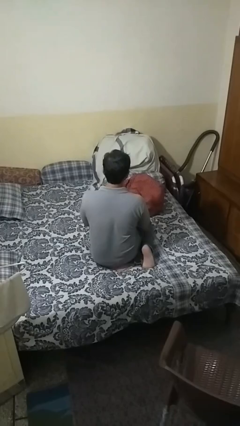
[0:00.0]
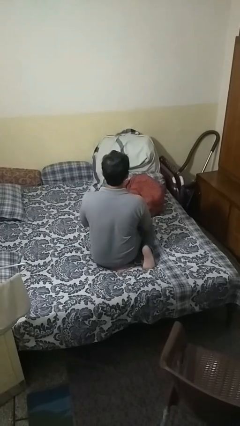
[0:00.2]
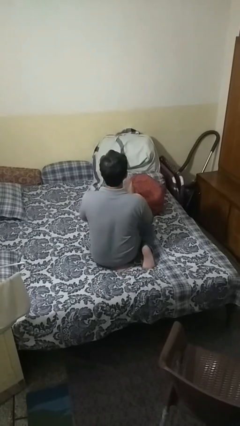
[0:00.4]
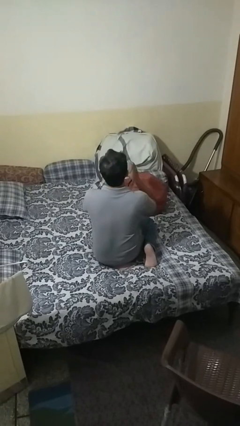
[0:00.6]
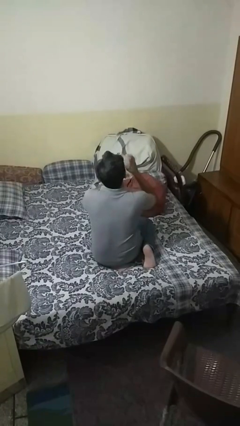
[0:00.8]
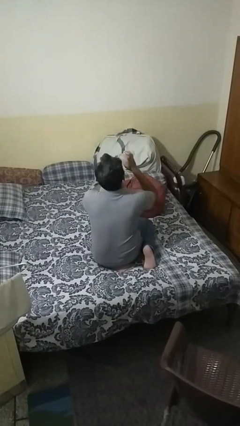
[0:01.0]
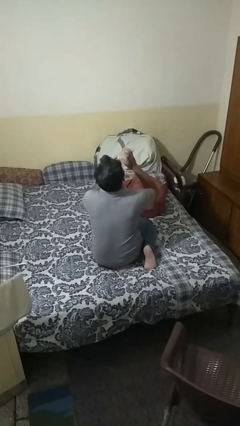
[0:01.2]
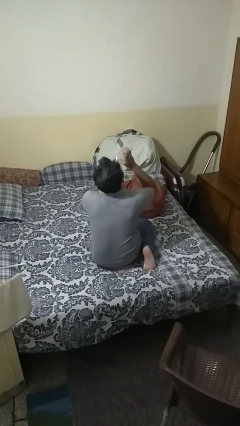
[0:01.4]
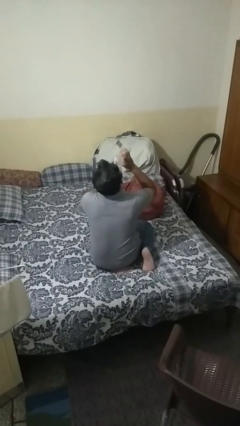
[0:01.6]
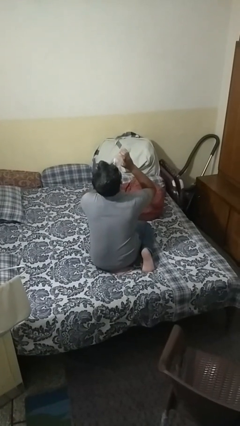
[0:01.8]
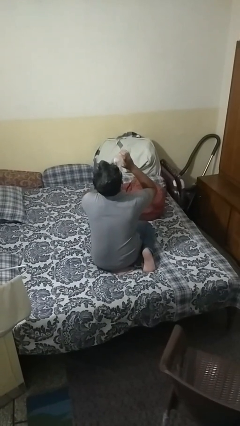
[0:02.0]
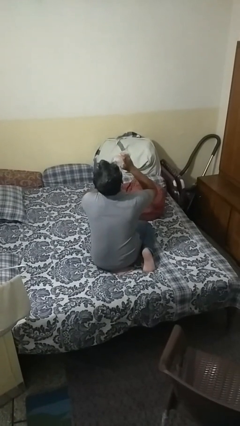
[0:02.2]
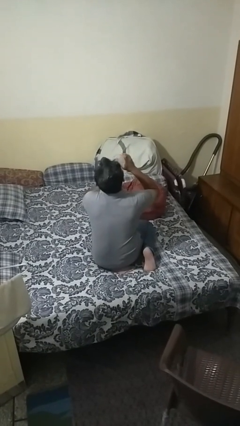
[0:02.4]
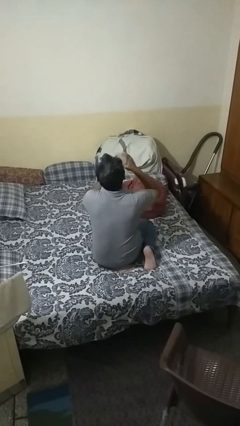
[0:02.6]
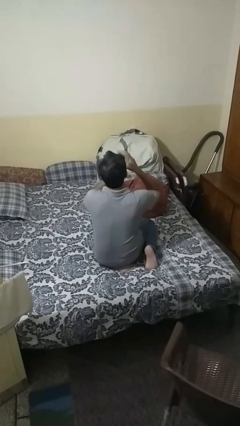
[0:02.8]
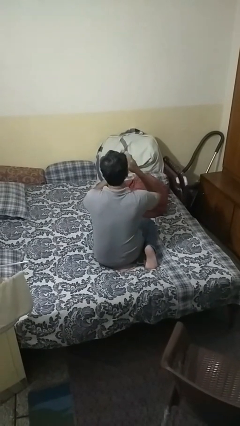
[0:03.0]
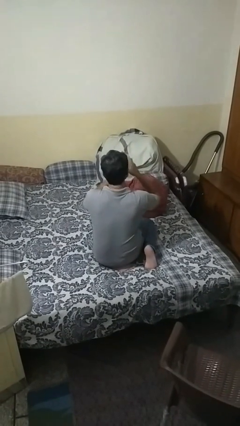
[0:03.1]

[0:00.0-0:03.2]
person drinks from bottle

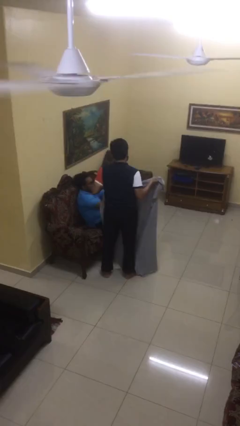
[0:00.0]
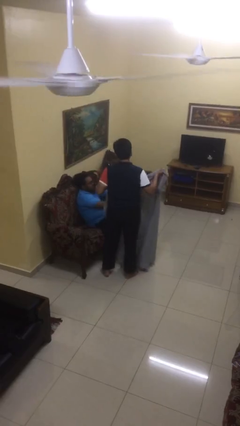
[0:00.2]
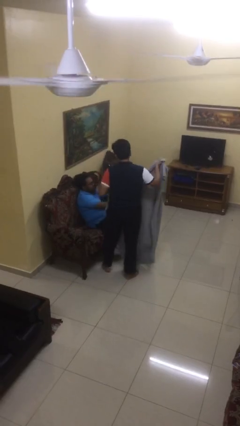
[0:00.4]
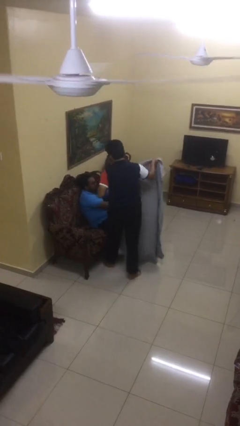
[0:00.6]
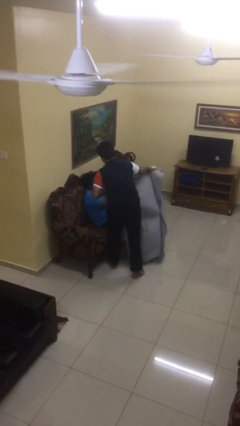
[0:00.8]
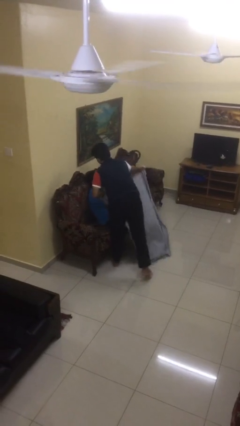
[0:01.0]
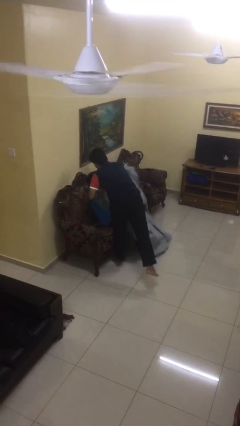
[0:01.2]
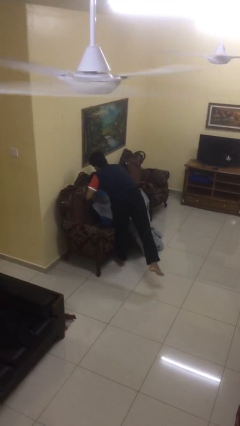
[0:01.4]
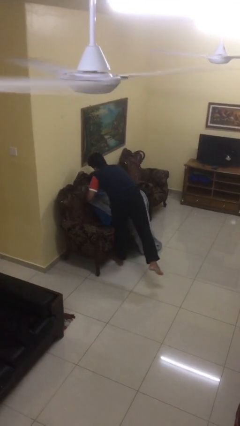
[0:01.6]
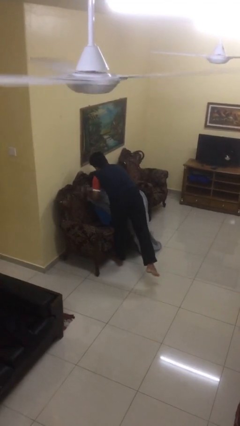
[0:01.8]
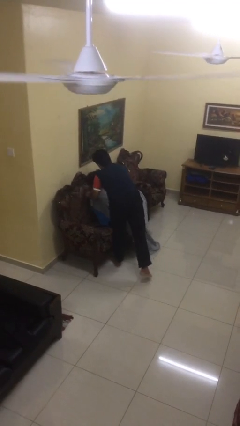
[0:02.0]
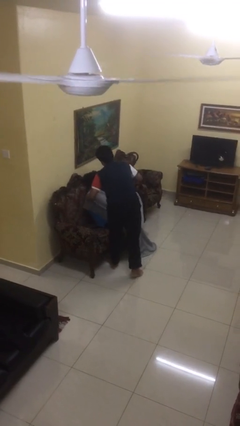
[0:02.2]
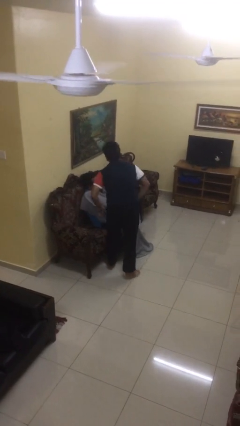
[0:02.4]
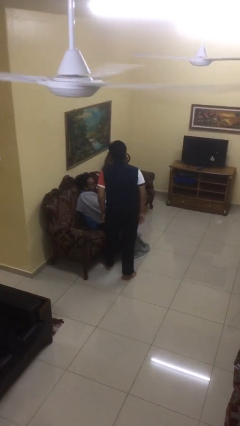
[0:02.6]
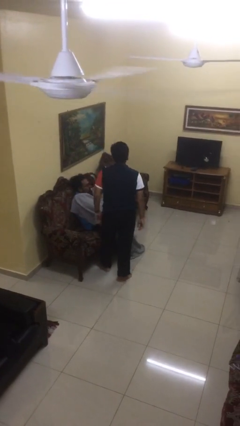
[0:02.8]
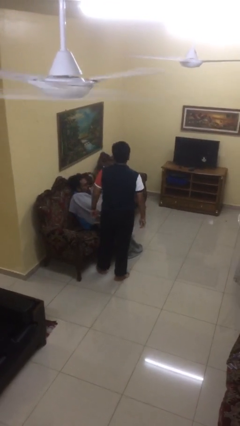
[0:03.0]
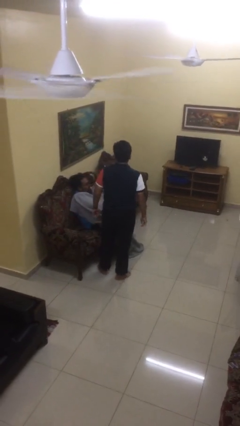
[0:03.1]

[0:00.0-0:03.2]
person covers friend with blanket

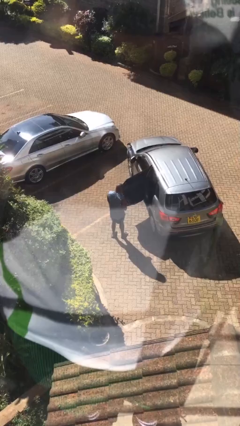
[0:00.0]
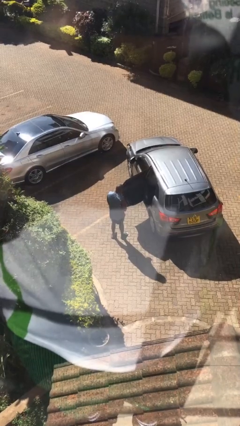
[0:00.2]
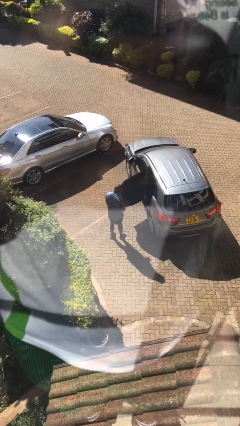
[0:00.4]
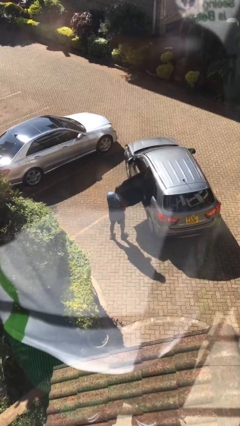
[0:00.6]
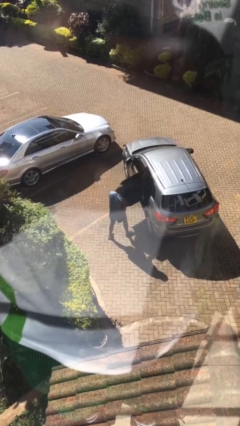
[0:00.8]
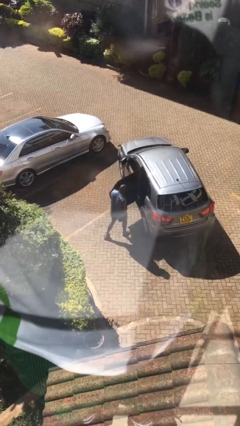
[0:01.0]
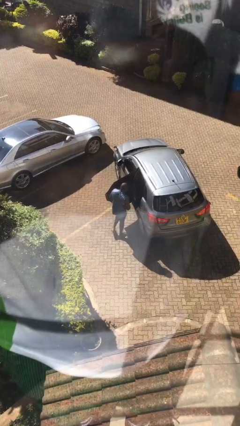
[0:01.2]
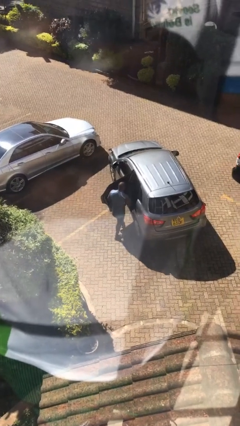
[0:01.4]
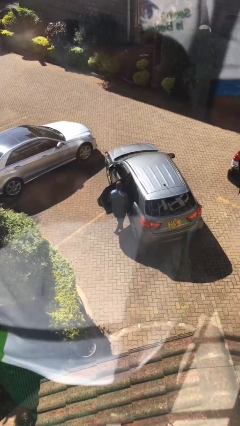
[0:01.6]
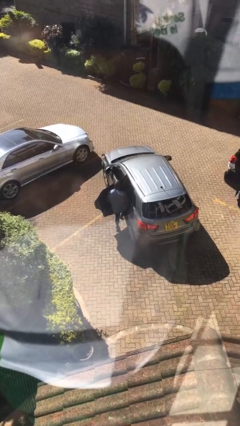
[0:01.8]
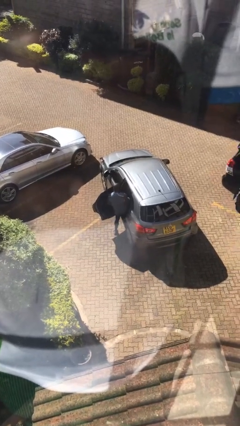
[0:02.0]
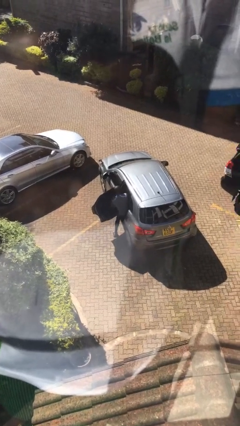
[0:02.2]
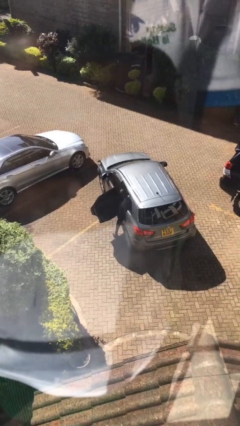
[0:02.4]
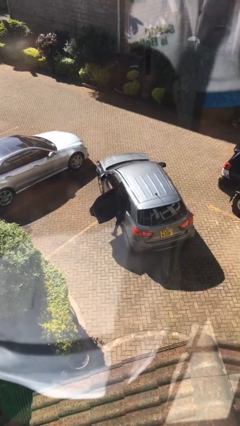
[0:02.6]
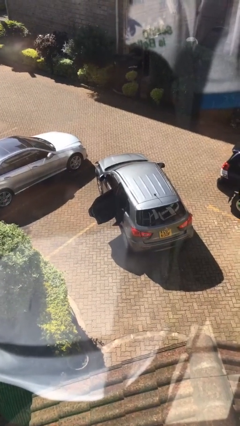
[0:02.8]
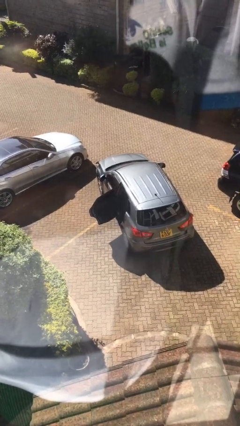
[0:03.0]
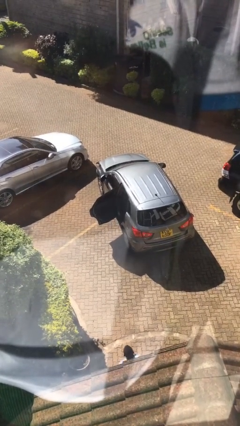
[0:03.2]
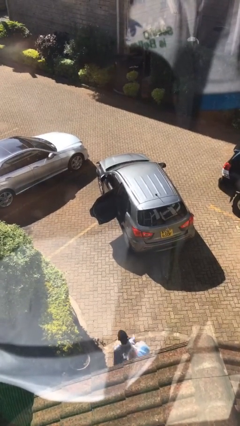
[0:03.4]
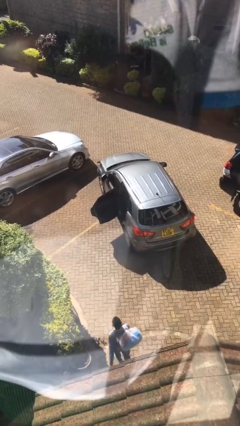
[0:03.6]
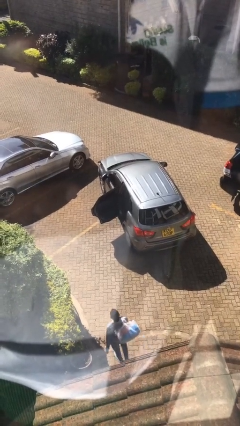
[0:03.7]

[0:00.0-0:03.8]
person enters car

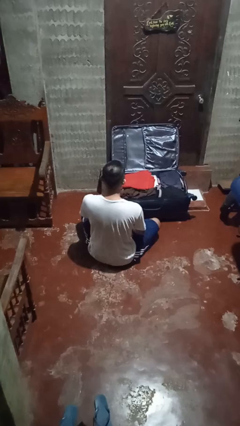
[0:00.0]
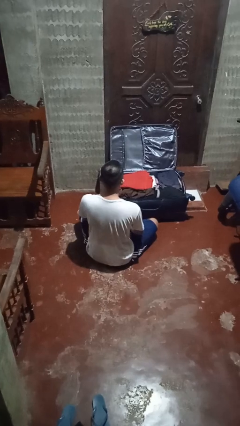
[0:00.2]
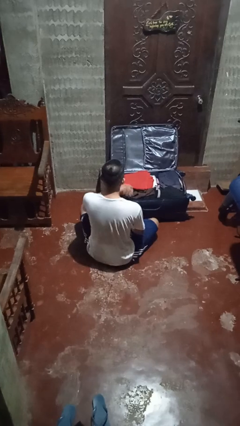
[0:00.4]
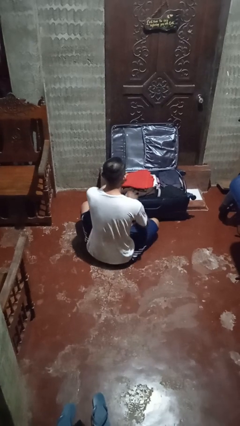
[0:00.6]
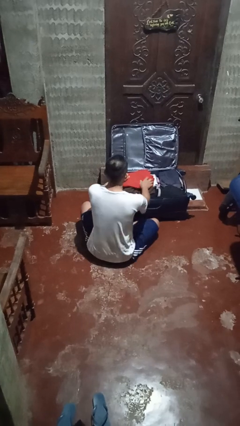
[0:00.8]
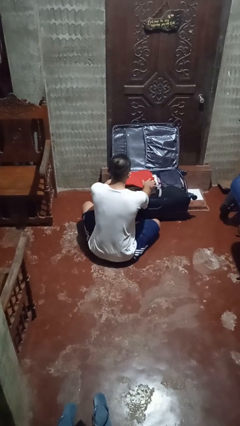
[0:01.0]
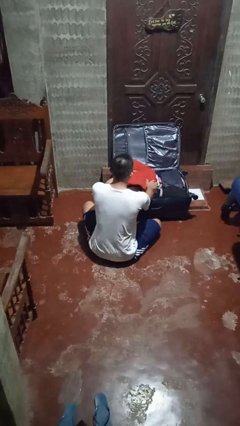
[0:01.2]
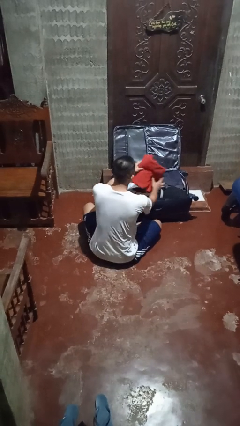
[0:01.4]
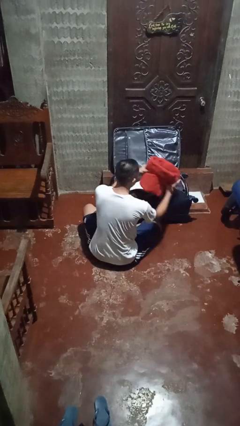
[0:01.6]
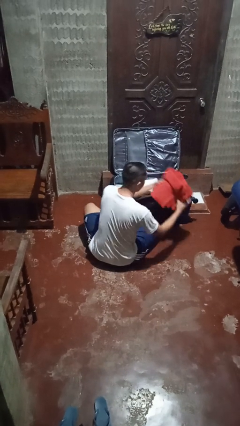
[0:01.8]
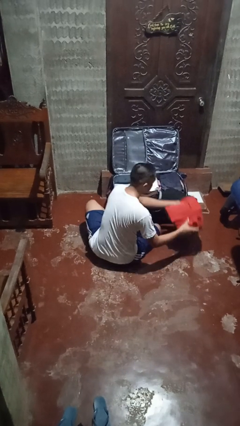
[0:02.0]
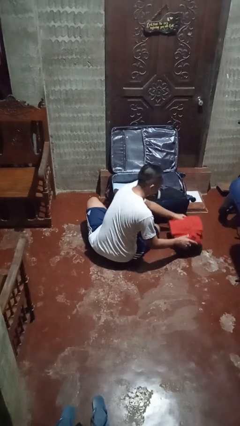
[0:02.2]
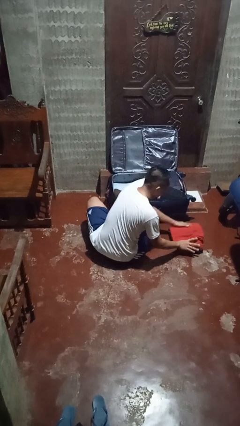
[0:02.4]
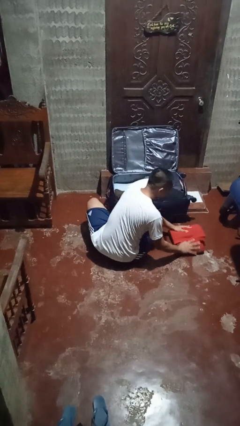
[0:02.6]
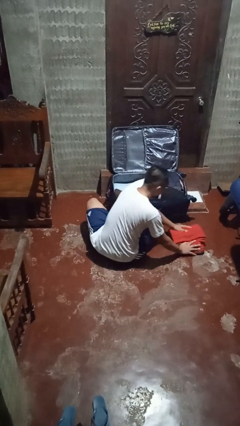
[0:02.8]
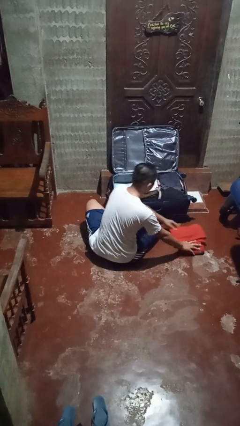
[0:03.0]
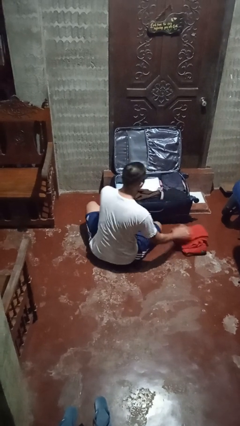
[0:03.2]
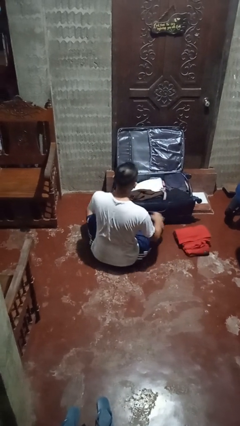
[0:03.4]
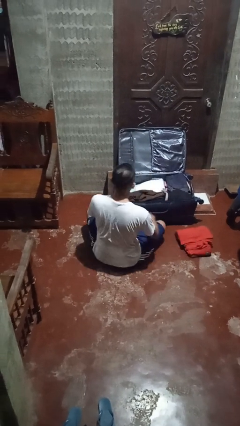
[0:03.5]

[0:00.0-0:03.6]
person unloads clothes from suitcase

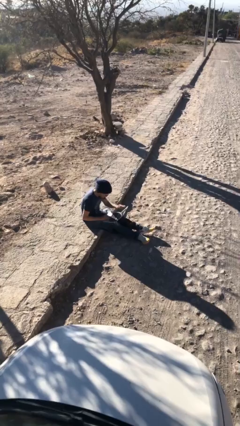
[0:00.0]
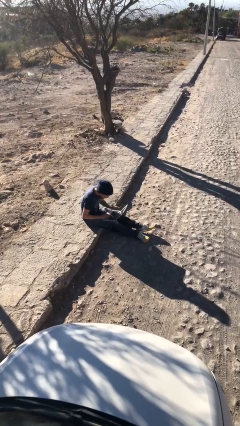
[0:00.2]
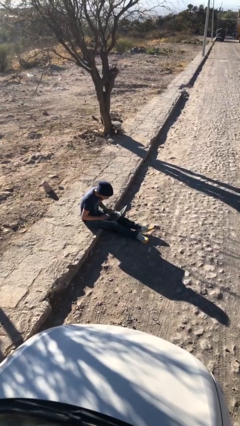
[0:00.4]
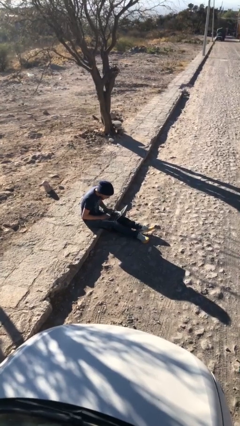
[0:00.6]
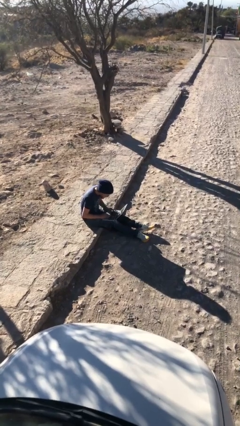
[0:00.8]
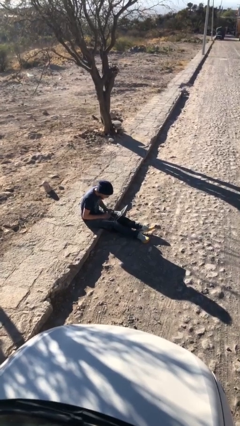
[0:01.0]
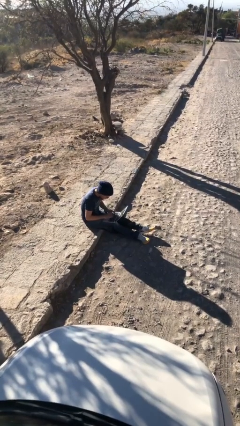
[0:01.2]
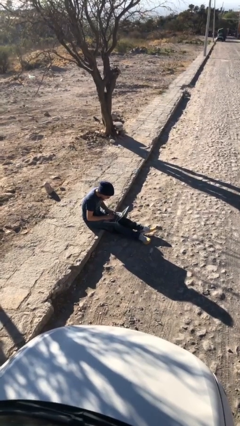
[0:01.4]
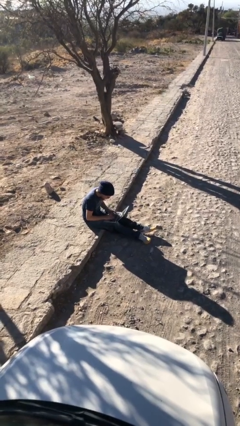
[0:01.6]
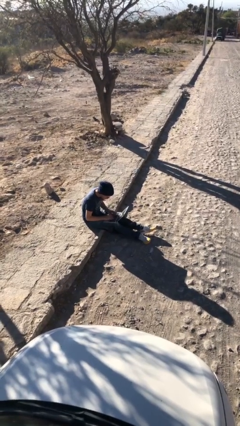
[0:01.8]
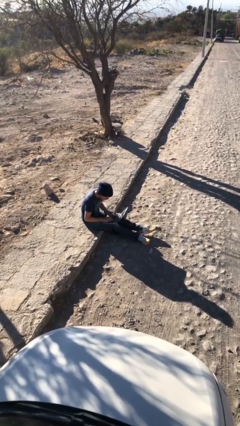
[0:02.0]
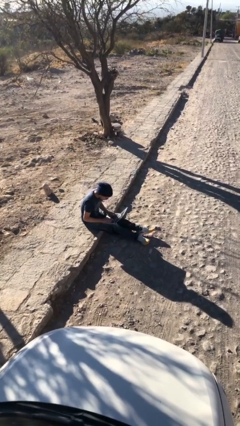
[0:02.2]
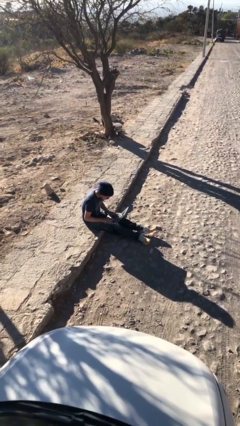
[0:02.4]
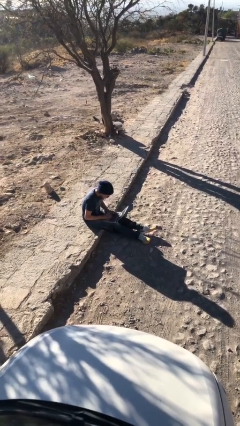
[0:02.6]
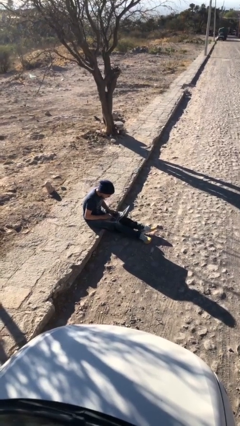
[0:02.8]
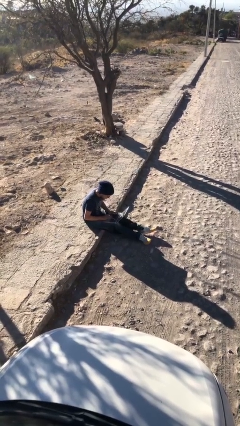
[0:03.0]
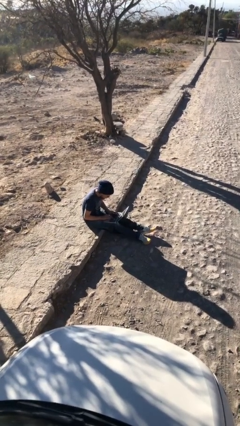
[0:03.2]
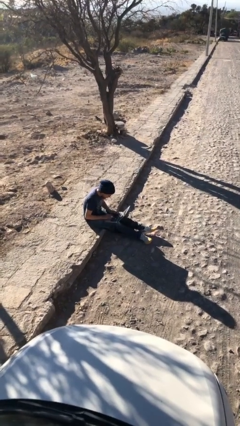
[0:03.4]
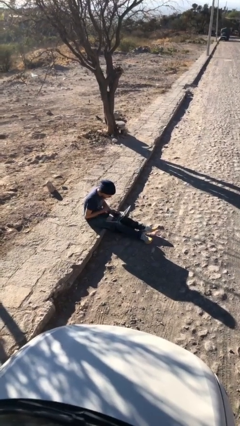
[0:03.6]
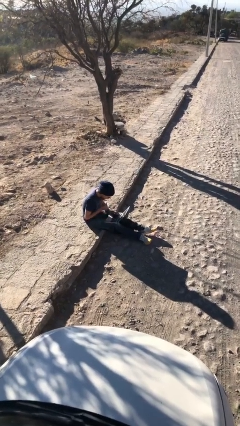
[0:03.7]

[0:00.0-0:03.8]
person interacts with laptop
